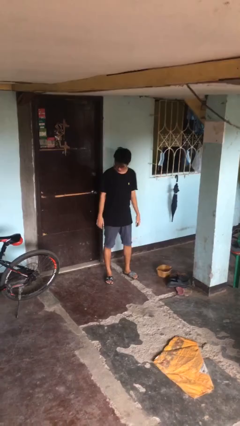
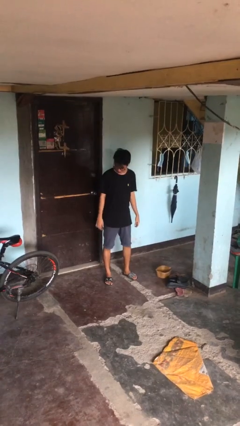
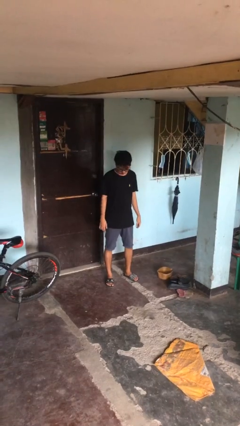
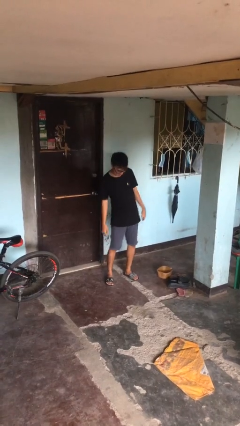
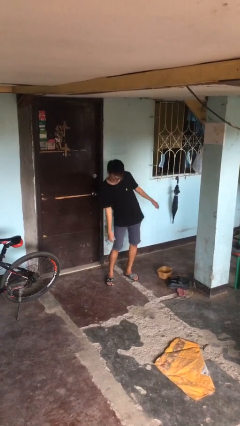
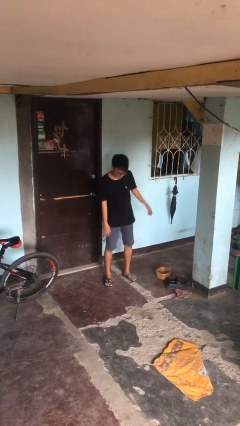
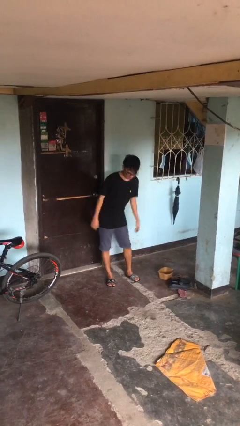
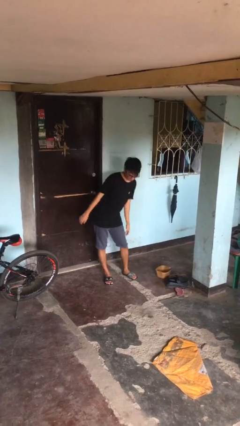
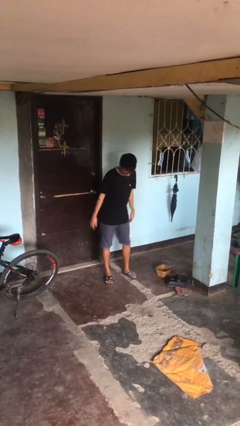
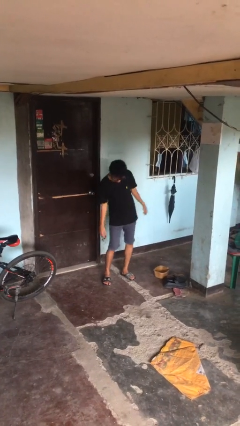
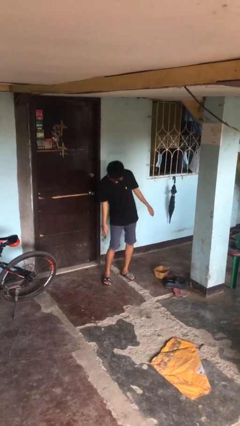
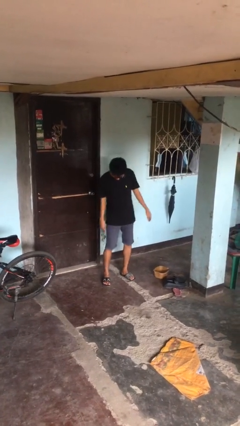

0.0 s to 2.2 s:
person wiggles hips

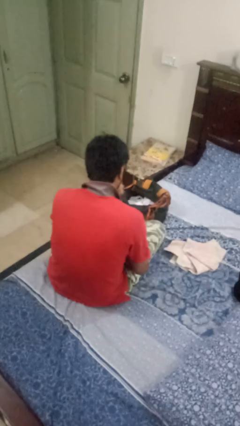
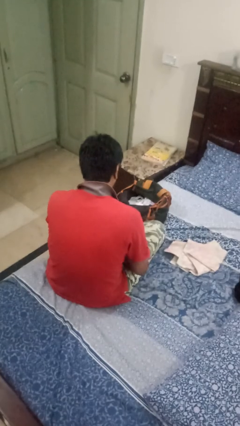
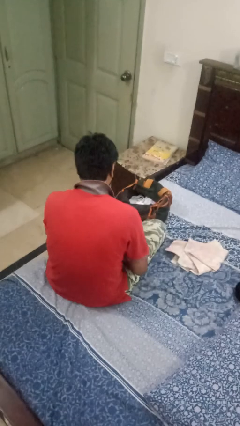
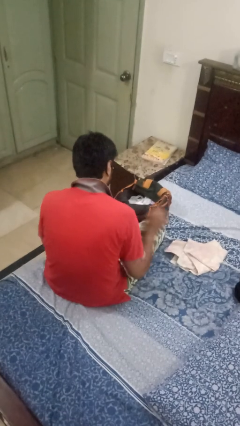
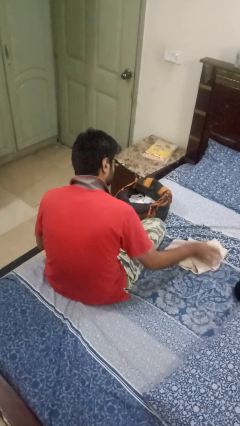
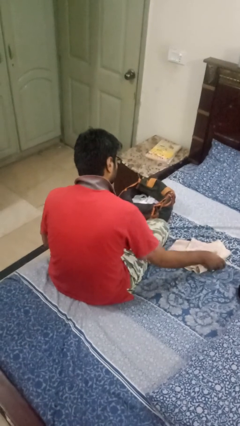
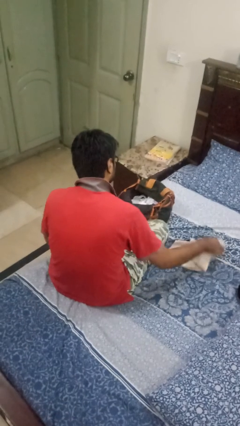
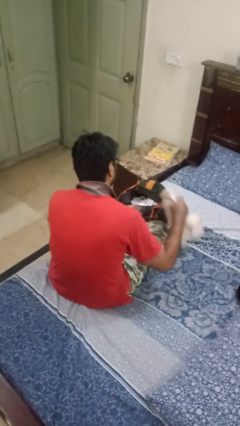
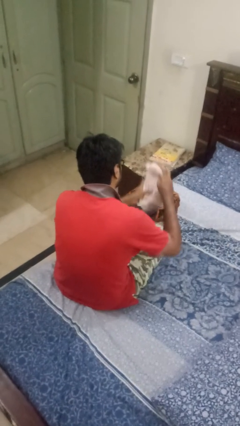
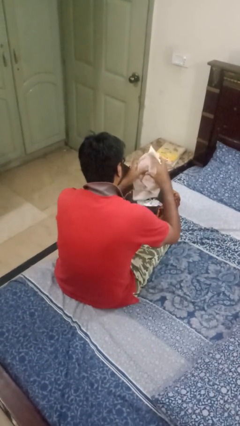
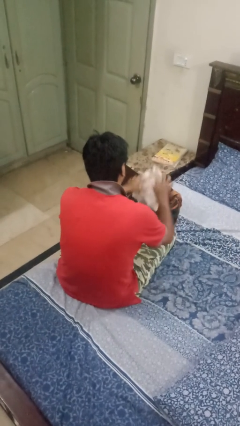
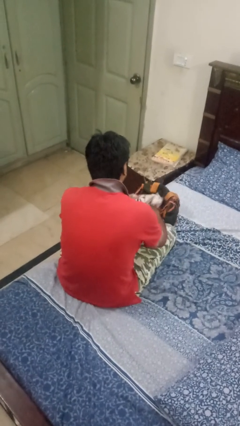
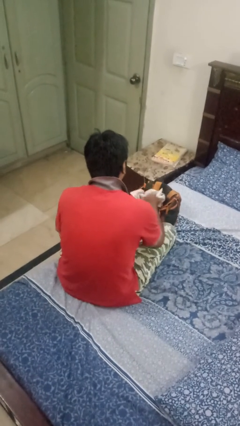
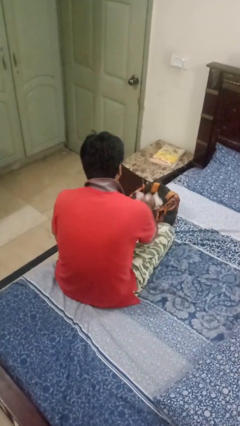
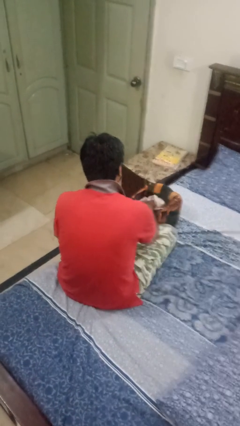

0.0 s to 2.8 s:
person puts object into bag

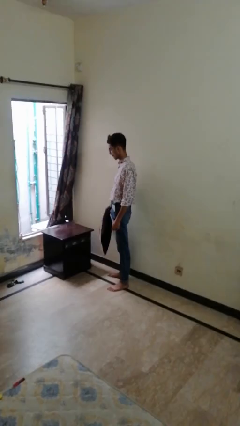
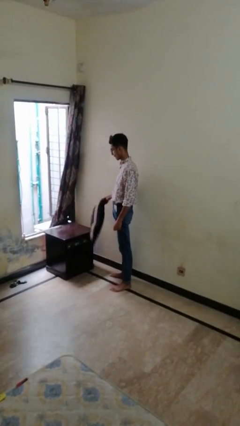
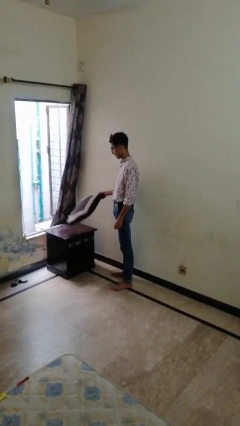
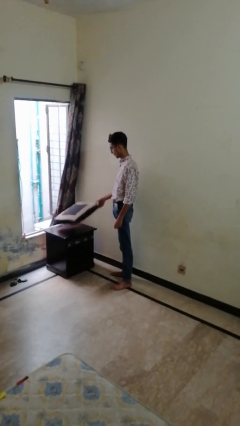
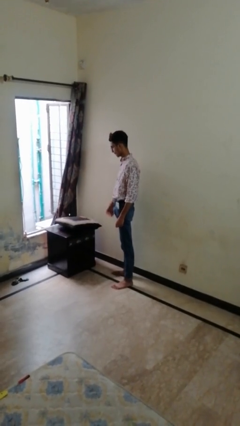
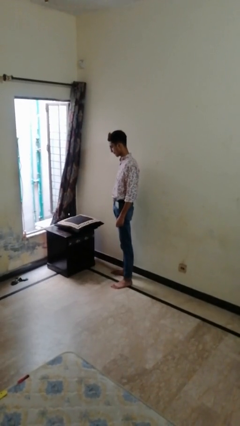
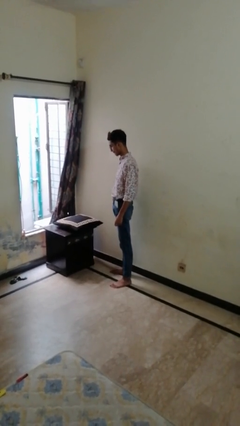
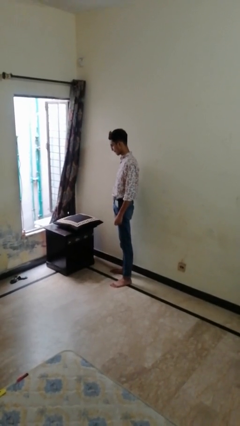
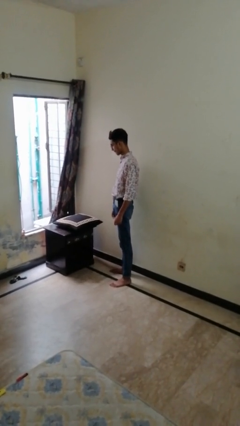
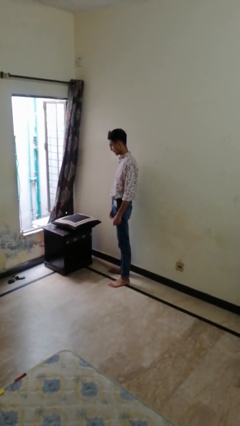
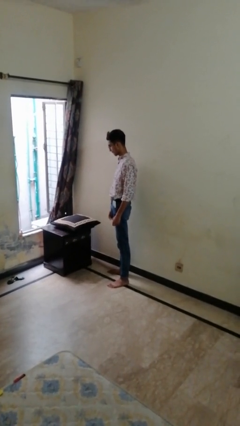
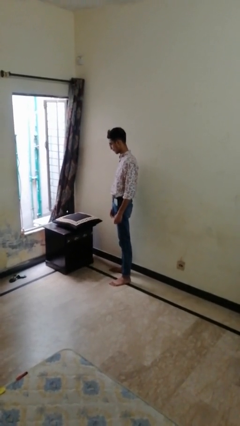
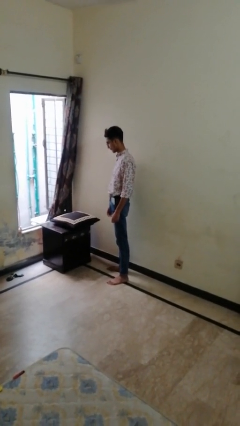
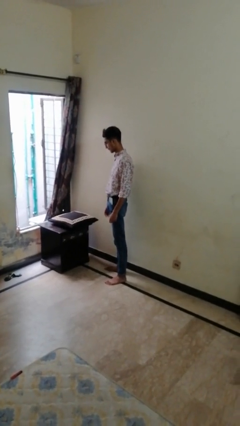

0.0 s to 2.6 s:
person throws object on table

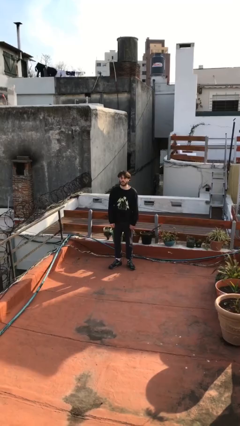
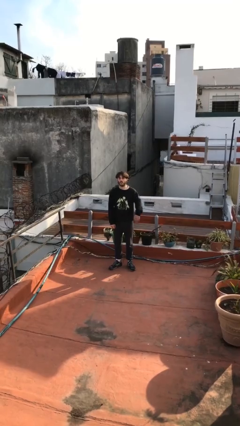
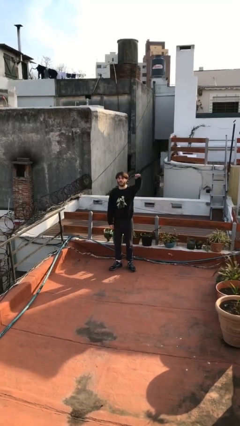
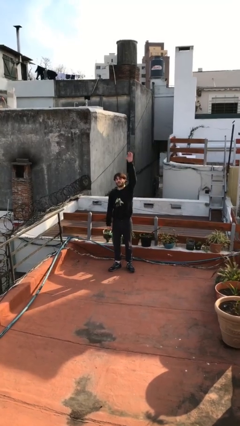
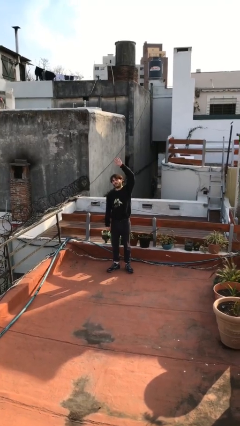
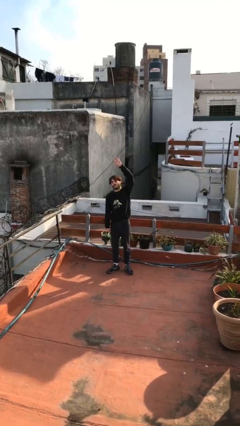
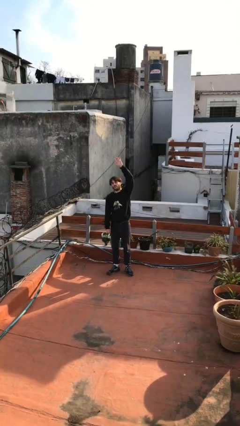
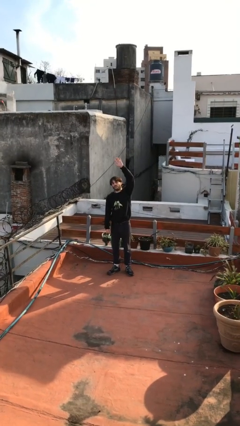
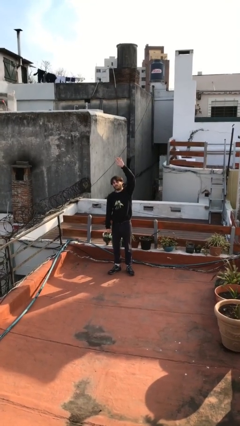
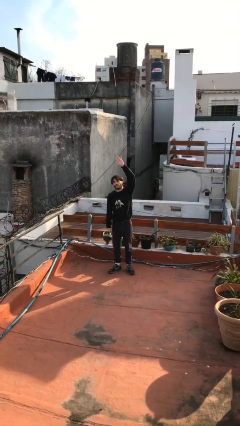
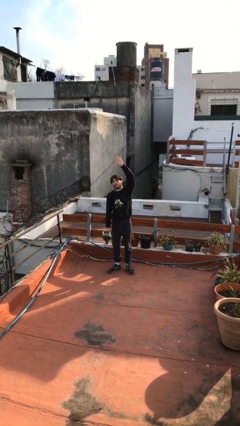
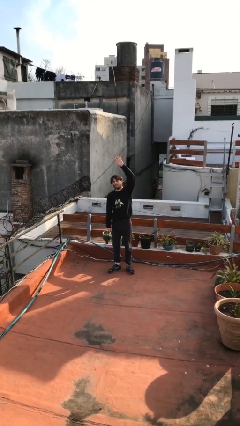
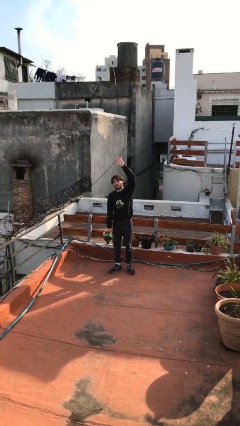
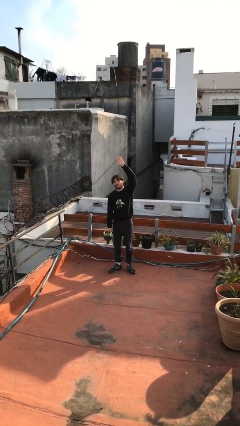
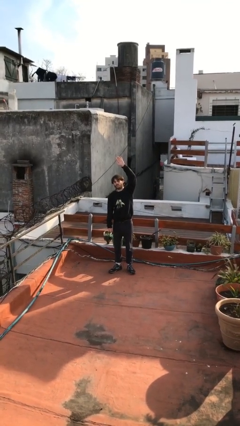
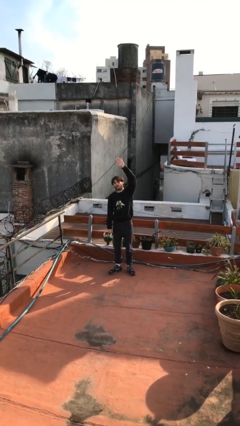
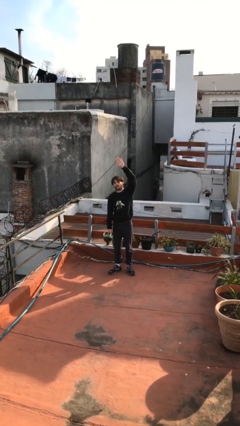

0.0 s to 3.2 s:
person gestures raise hand

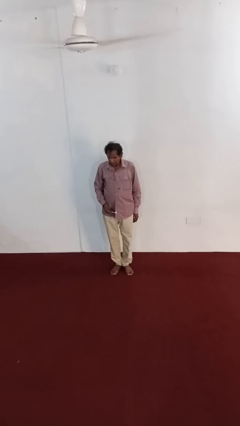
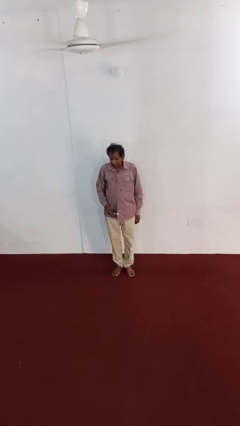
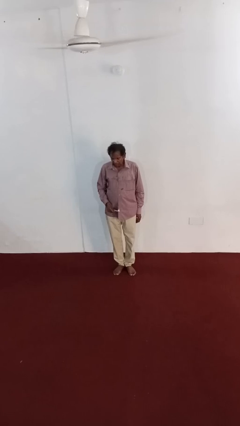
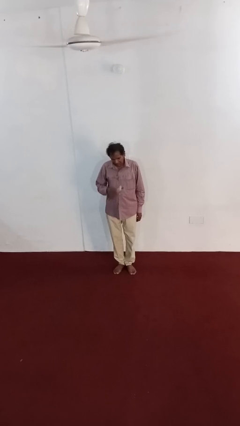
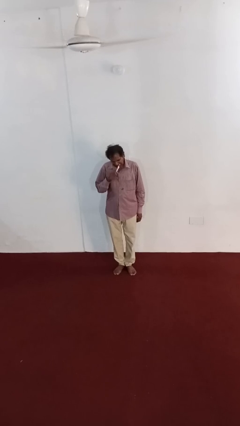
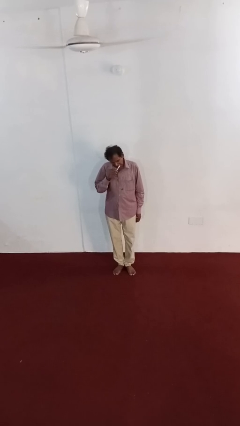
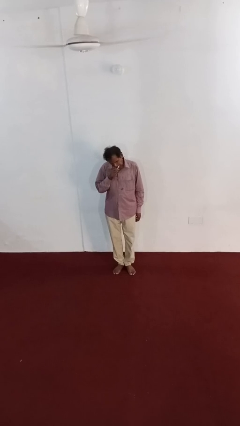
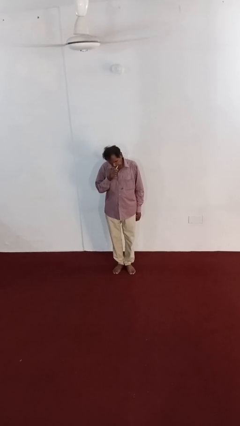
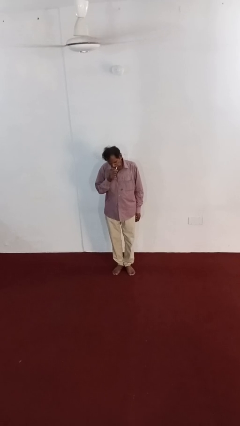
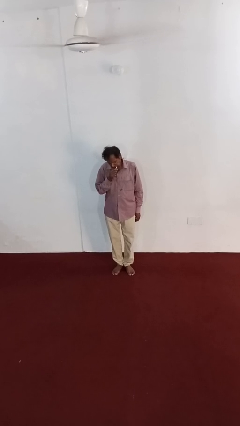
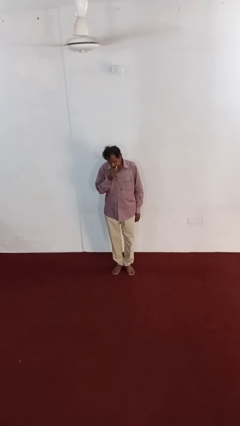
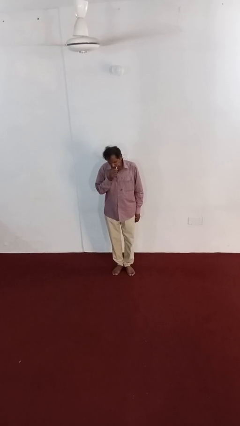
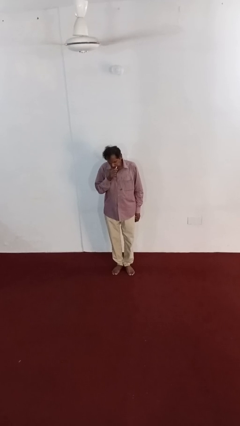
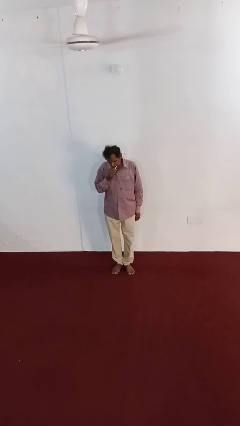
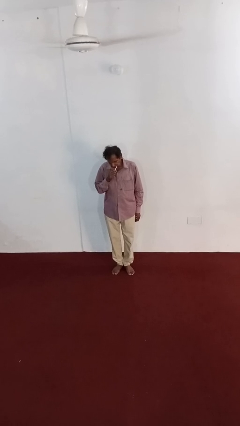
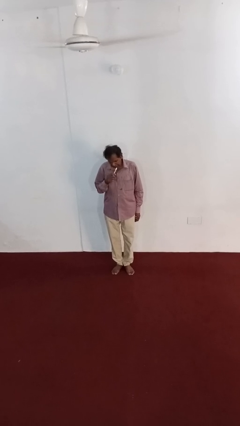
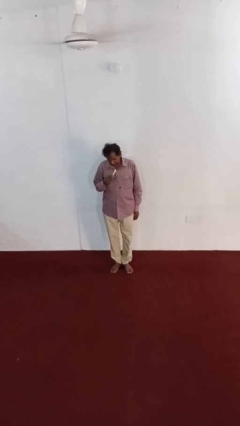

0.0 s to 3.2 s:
person brushes teeth

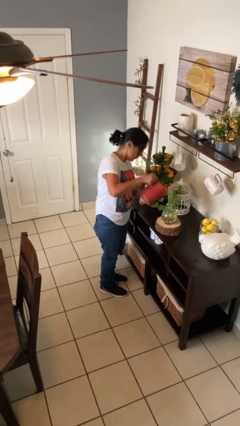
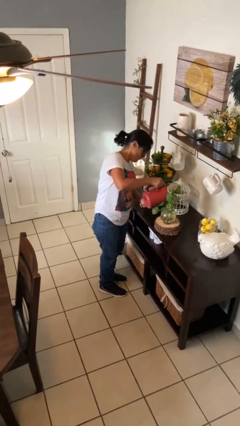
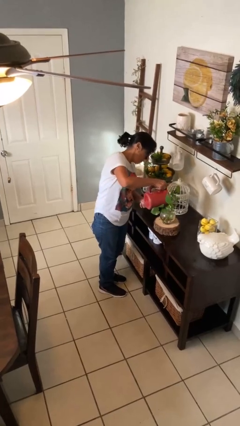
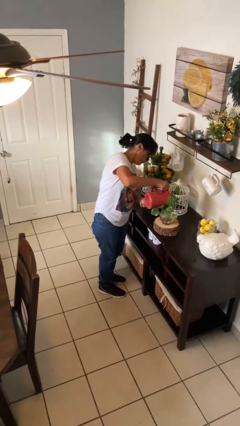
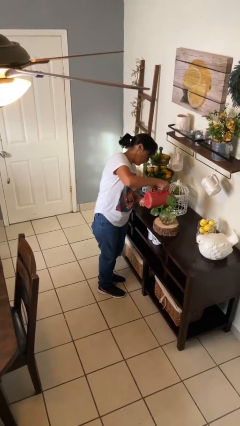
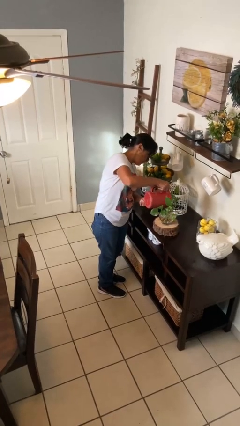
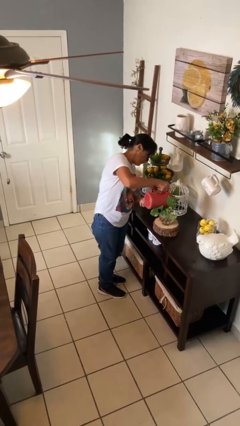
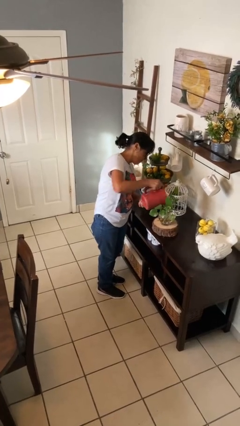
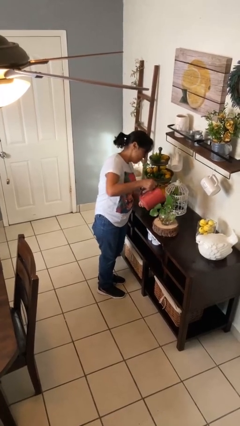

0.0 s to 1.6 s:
person waters houseplant

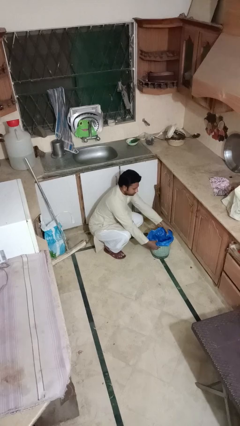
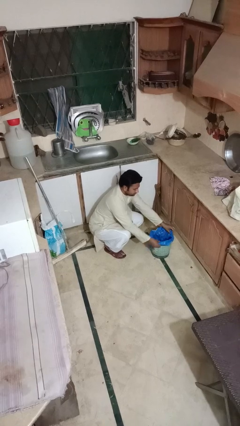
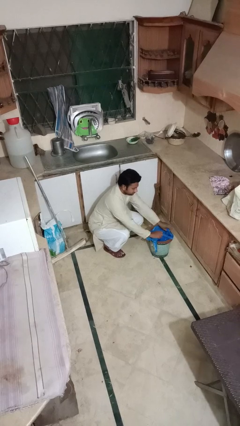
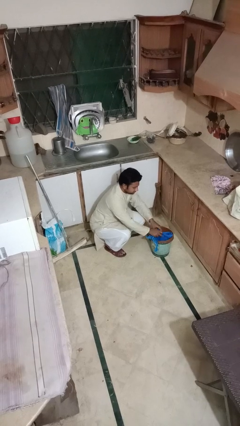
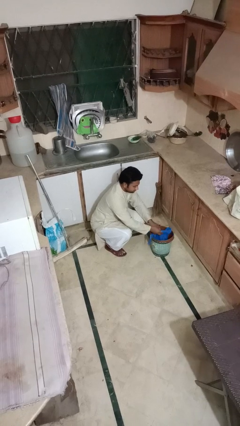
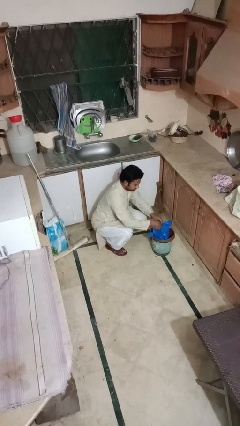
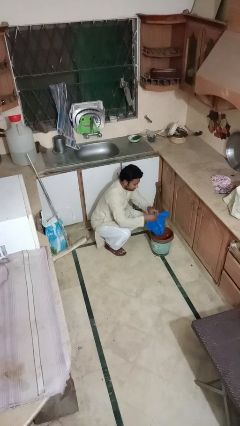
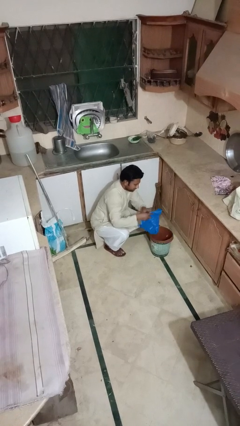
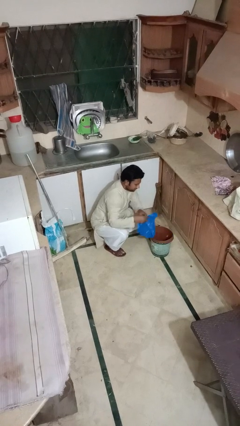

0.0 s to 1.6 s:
person removes trashbag from trashcan
